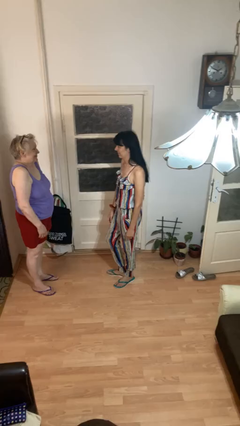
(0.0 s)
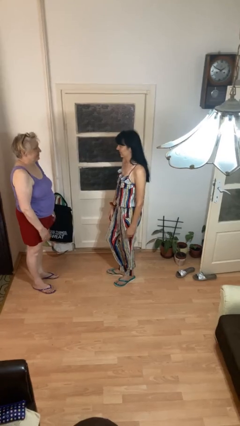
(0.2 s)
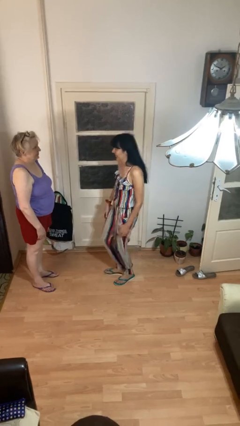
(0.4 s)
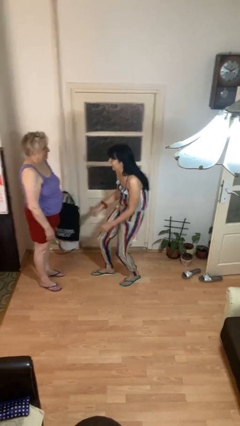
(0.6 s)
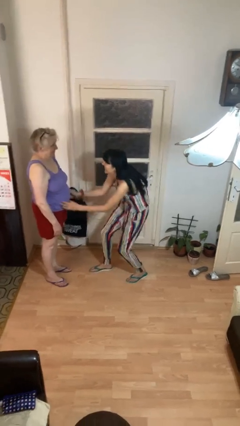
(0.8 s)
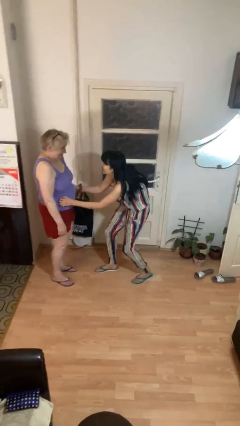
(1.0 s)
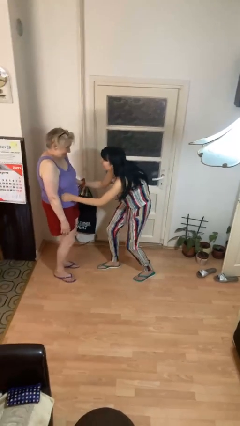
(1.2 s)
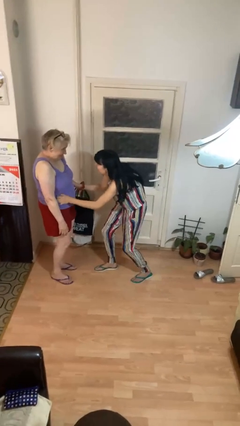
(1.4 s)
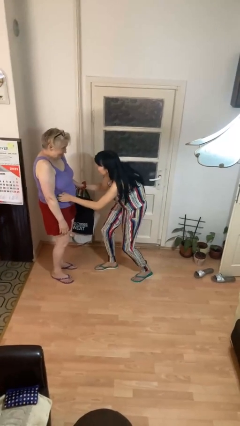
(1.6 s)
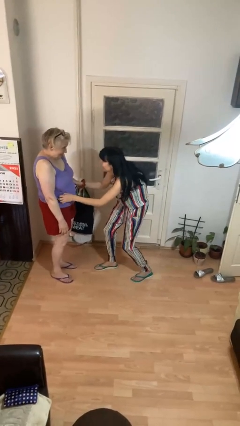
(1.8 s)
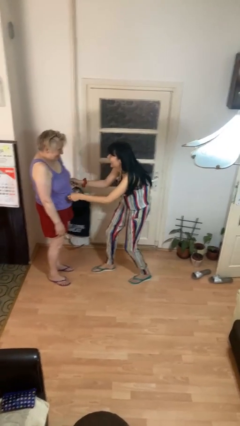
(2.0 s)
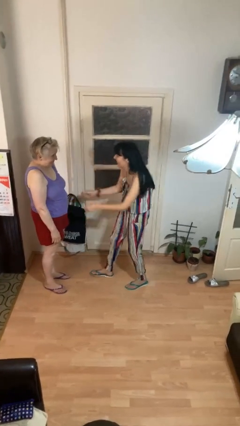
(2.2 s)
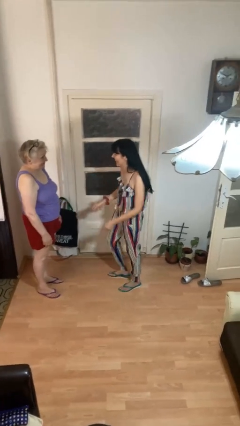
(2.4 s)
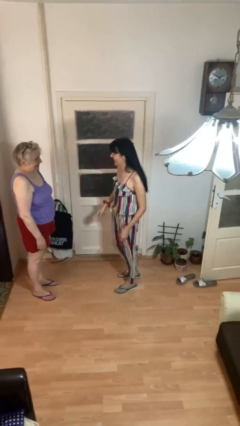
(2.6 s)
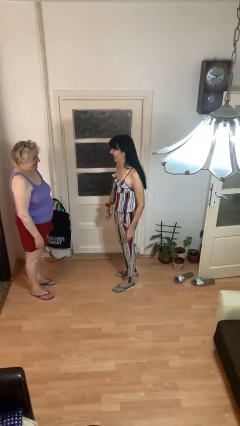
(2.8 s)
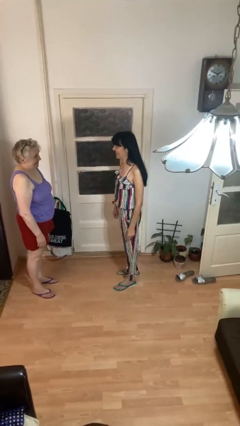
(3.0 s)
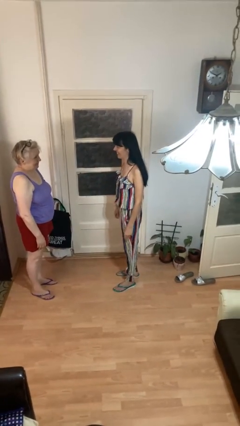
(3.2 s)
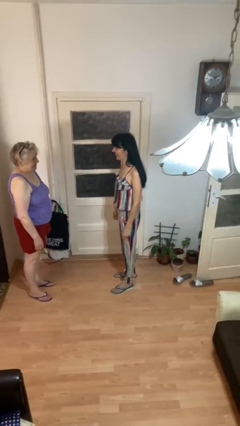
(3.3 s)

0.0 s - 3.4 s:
person tickles person

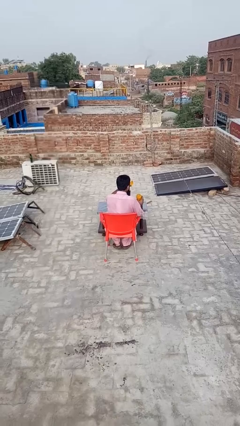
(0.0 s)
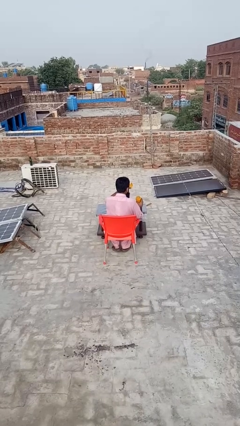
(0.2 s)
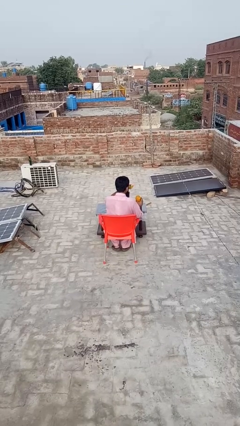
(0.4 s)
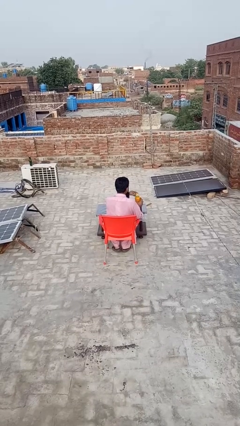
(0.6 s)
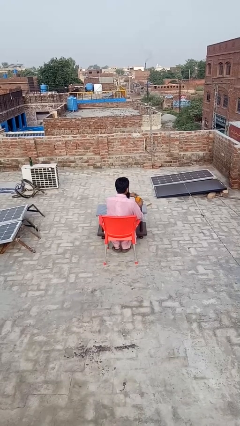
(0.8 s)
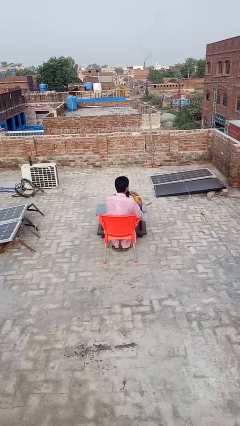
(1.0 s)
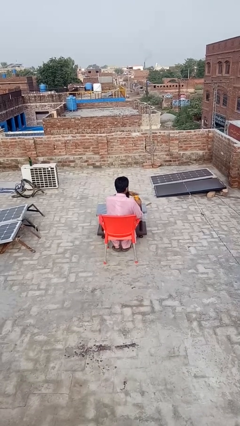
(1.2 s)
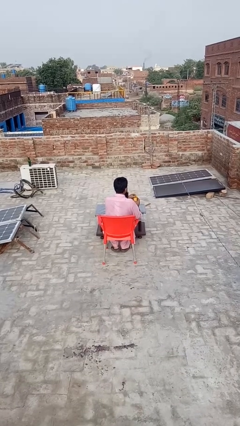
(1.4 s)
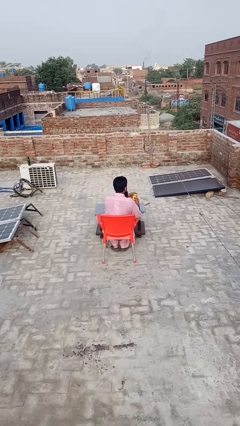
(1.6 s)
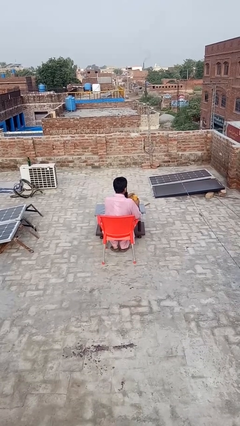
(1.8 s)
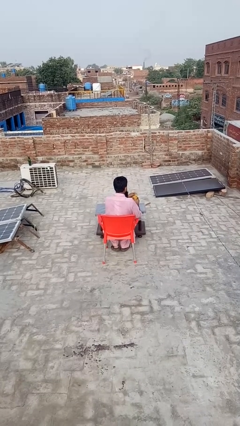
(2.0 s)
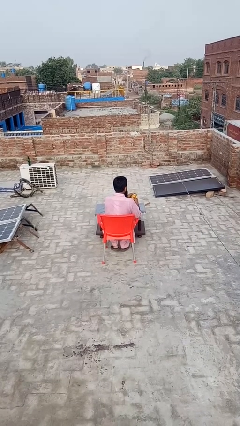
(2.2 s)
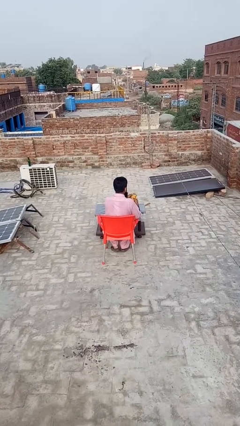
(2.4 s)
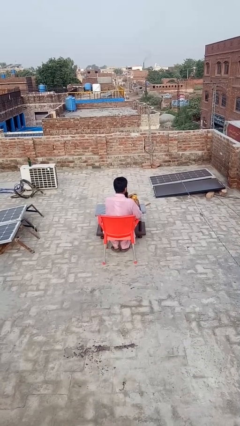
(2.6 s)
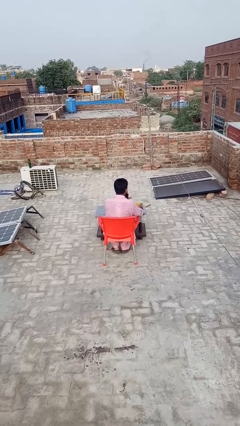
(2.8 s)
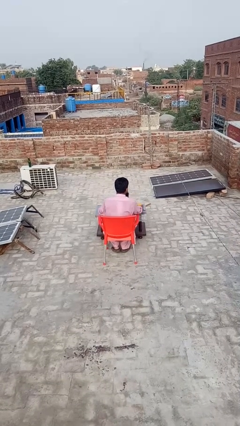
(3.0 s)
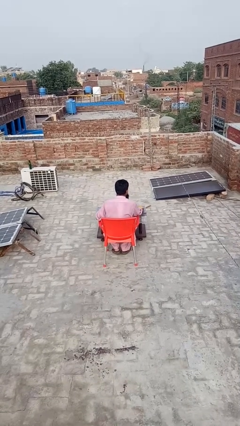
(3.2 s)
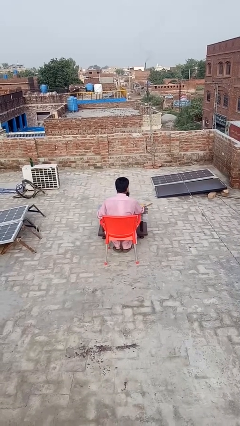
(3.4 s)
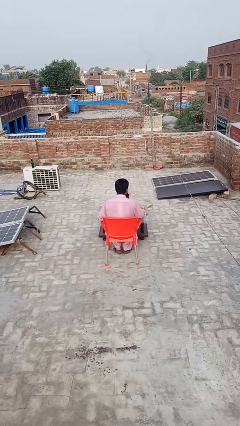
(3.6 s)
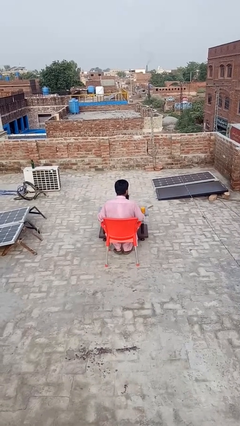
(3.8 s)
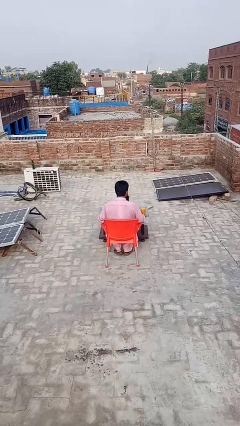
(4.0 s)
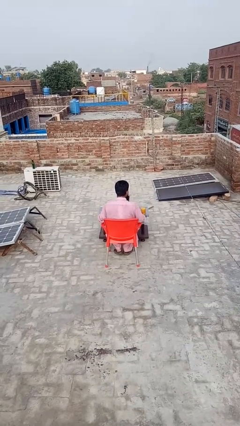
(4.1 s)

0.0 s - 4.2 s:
person closes jar

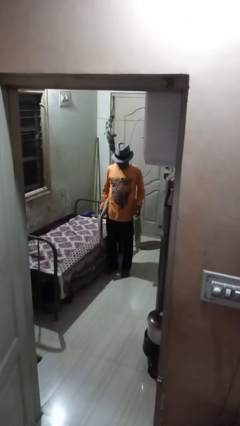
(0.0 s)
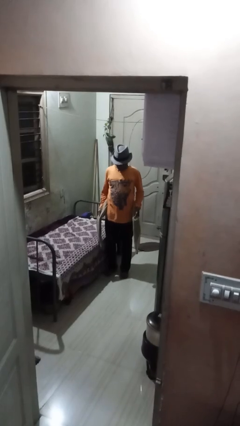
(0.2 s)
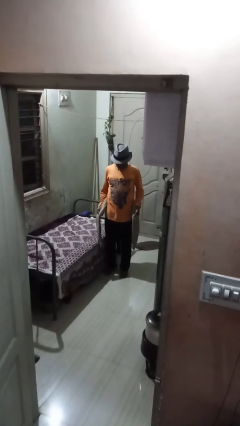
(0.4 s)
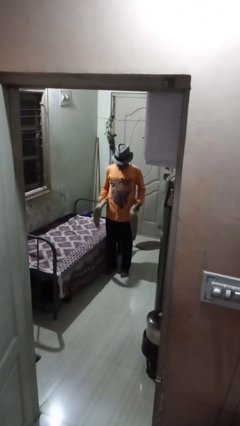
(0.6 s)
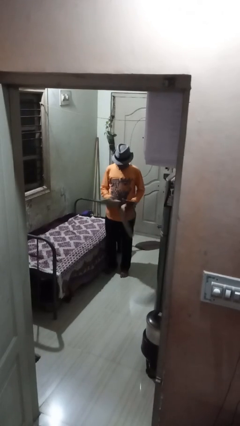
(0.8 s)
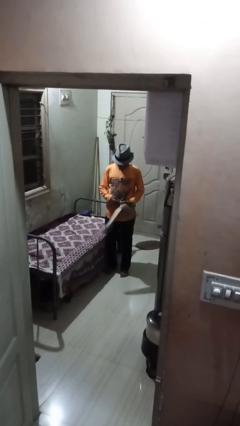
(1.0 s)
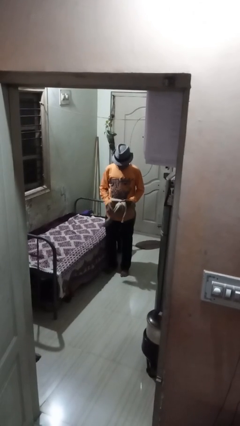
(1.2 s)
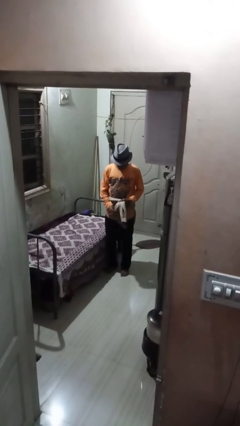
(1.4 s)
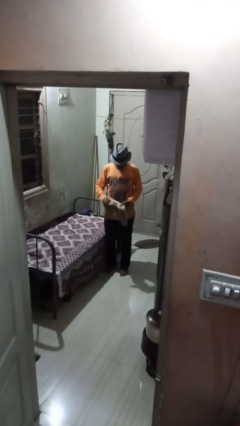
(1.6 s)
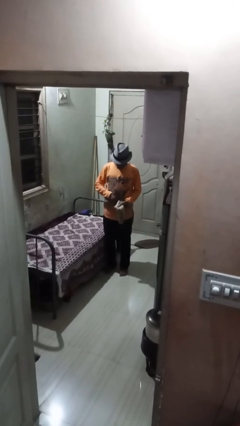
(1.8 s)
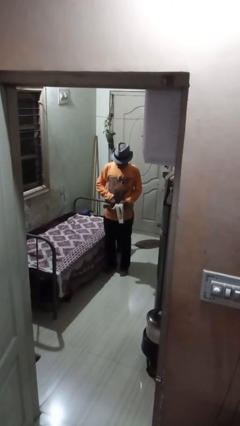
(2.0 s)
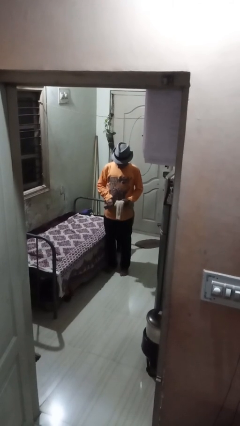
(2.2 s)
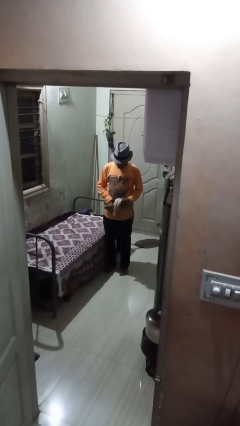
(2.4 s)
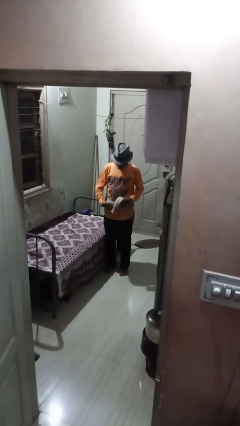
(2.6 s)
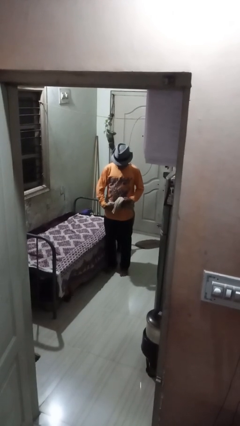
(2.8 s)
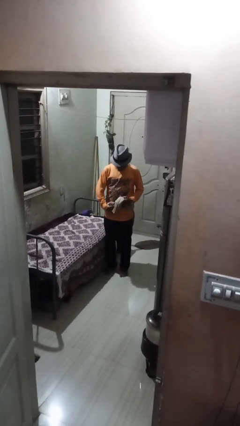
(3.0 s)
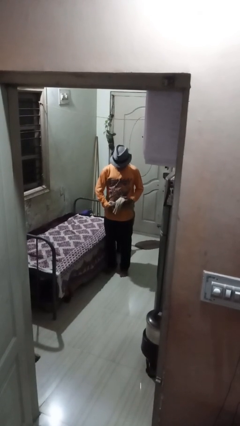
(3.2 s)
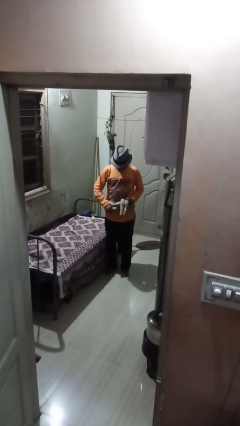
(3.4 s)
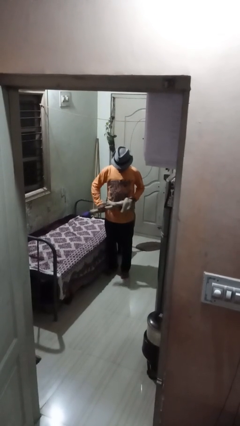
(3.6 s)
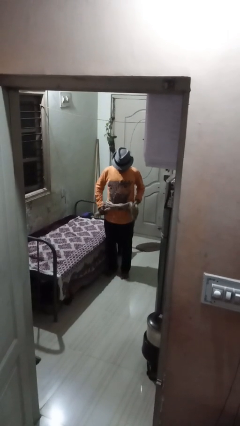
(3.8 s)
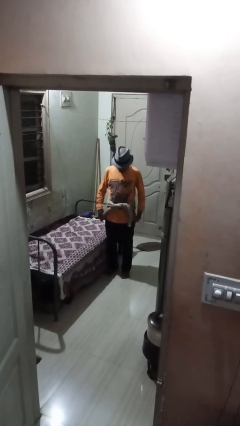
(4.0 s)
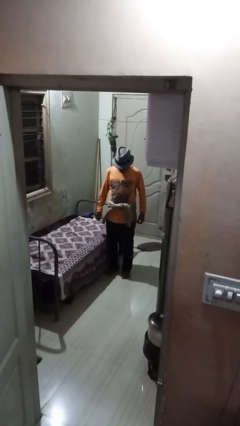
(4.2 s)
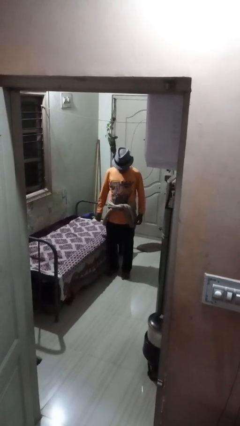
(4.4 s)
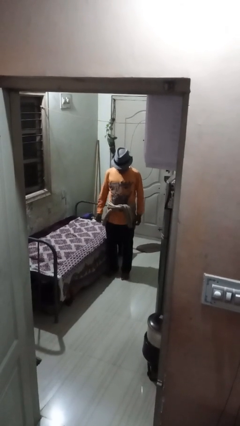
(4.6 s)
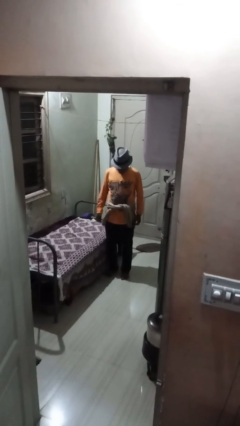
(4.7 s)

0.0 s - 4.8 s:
person ties jacket around waist

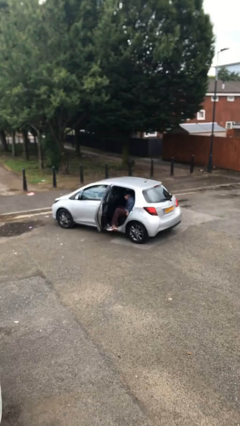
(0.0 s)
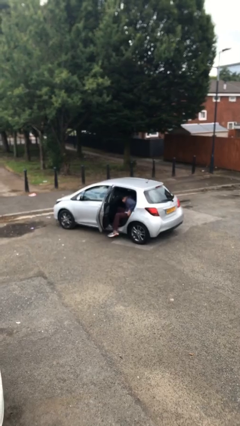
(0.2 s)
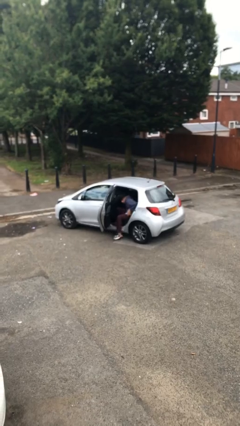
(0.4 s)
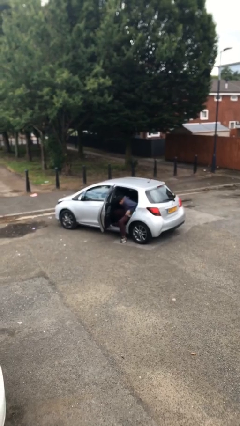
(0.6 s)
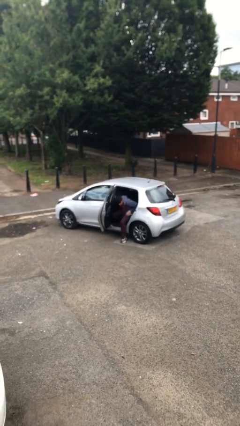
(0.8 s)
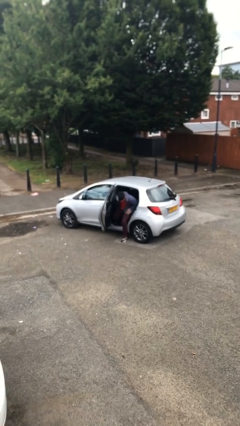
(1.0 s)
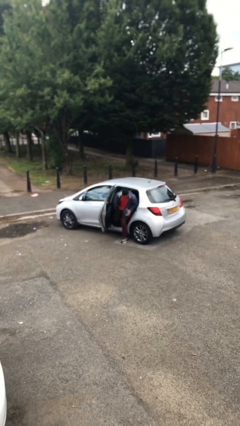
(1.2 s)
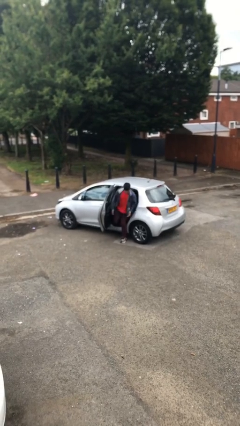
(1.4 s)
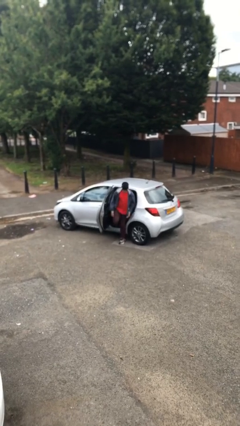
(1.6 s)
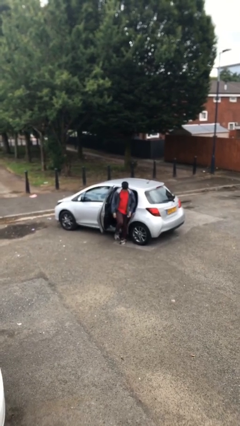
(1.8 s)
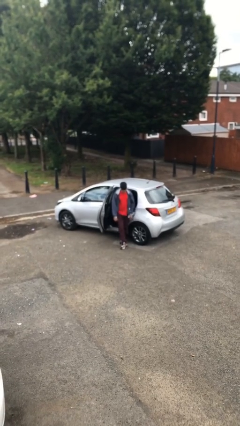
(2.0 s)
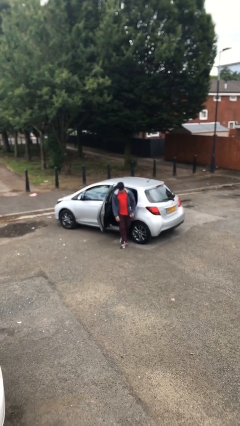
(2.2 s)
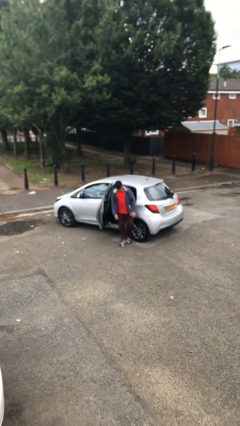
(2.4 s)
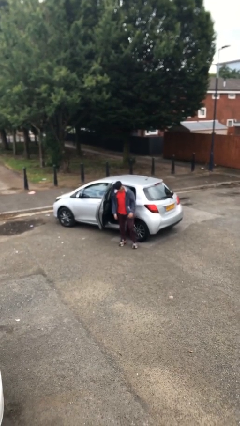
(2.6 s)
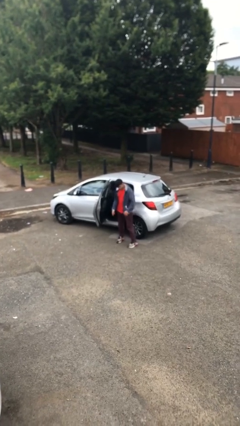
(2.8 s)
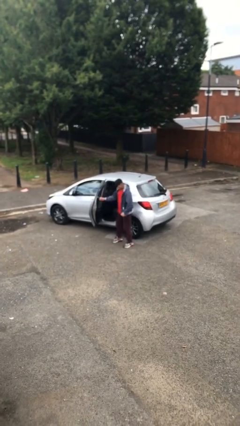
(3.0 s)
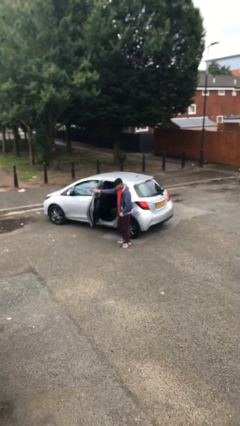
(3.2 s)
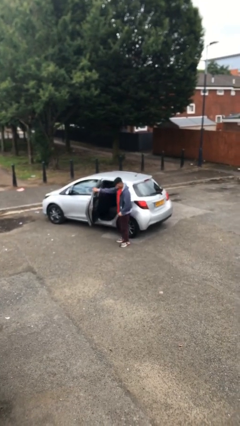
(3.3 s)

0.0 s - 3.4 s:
person exits car

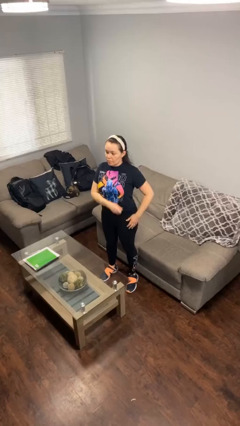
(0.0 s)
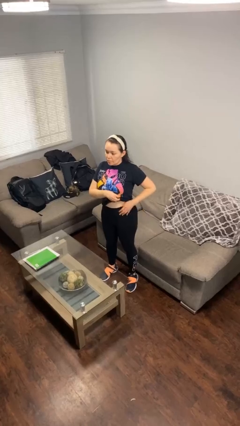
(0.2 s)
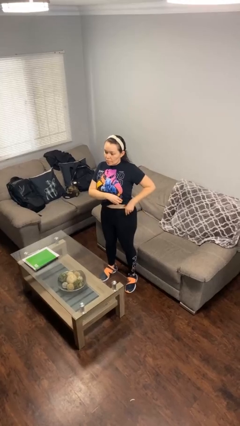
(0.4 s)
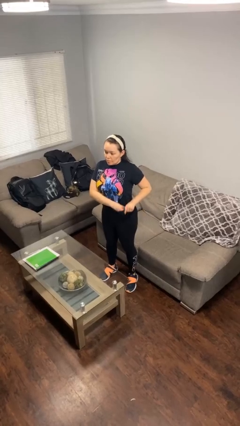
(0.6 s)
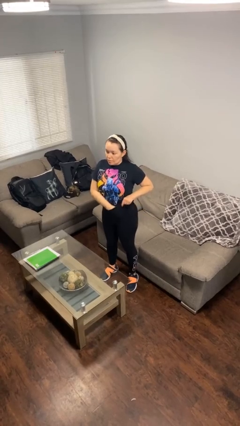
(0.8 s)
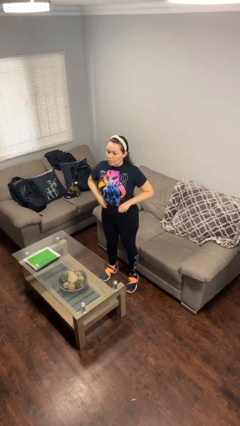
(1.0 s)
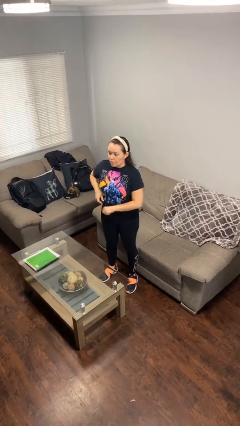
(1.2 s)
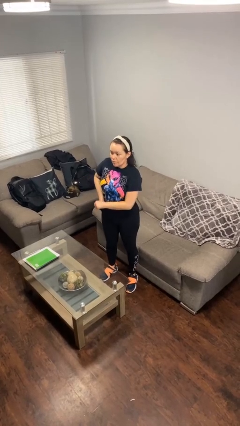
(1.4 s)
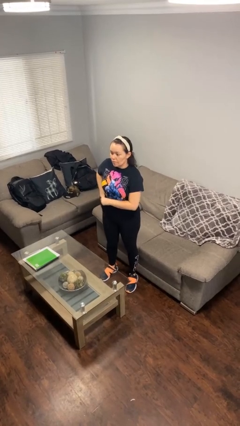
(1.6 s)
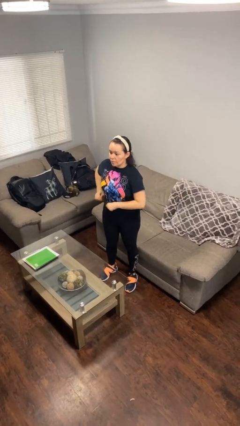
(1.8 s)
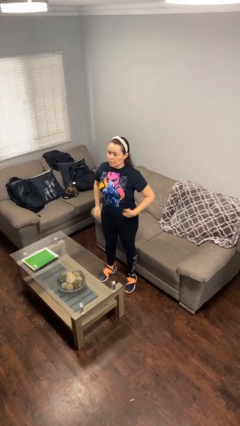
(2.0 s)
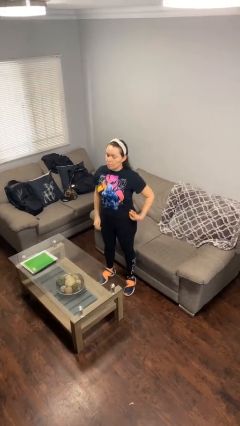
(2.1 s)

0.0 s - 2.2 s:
person tucks in shirt
